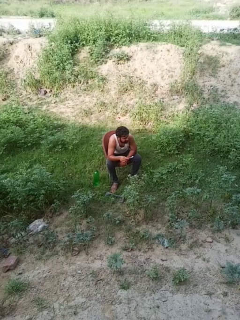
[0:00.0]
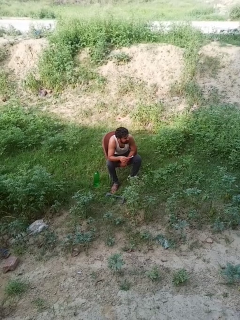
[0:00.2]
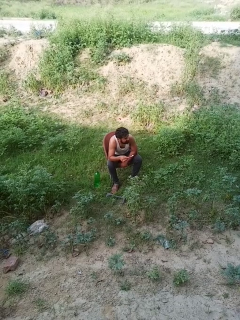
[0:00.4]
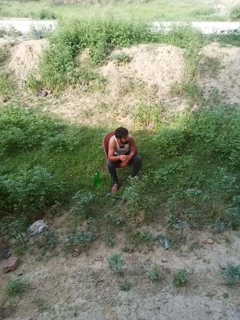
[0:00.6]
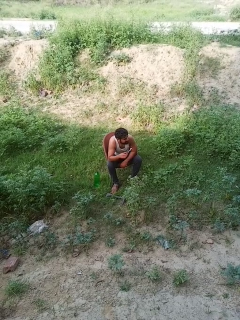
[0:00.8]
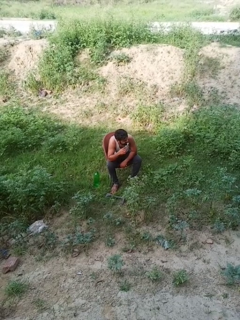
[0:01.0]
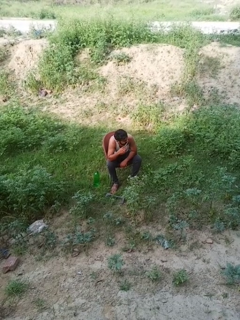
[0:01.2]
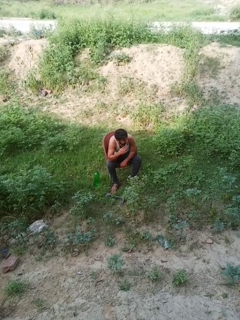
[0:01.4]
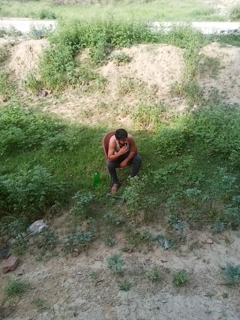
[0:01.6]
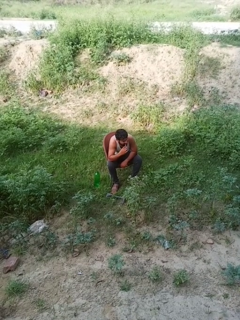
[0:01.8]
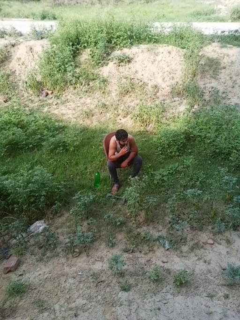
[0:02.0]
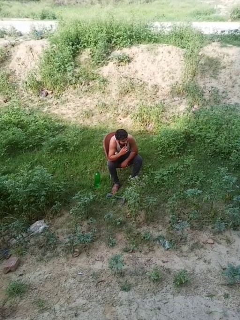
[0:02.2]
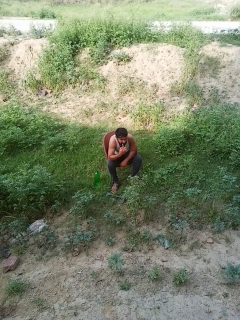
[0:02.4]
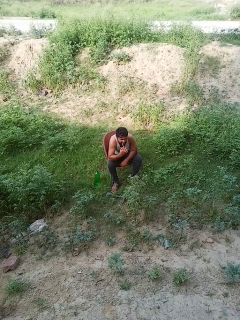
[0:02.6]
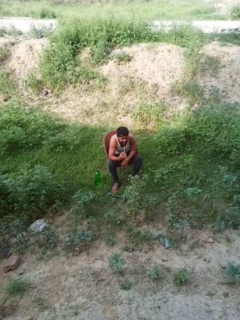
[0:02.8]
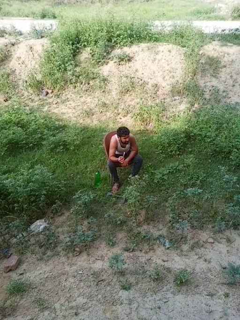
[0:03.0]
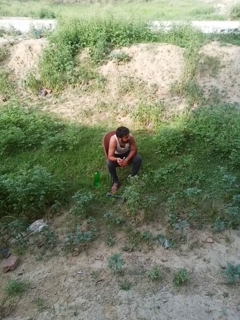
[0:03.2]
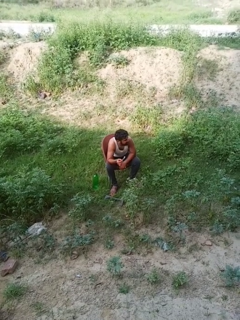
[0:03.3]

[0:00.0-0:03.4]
person brushes teeth

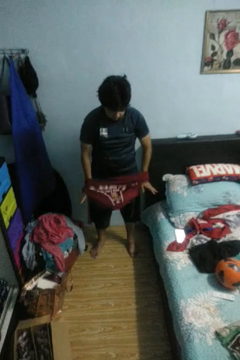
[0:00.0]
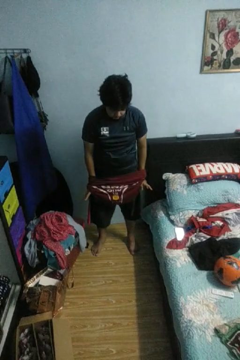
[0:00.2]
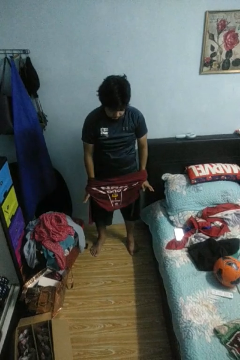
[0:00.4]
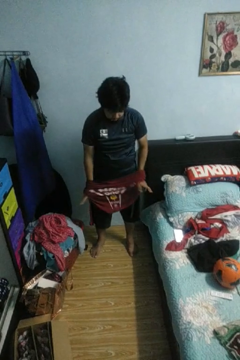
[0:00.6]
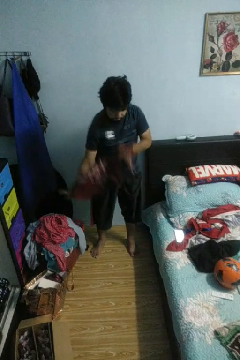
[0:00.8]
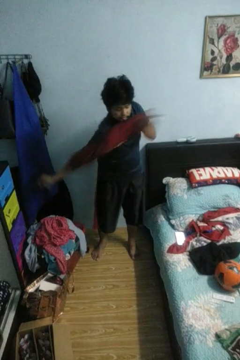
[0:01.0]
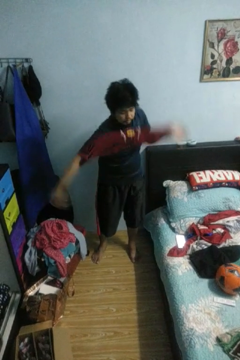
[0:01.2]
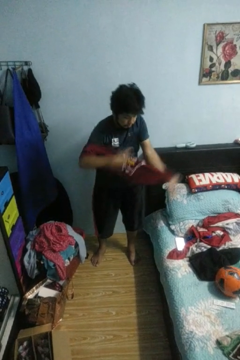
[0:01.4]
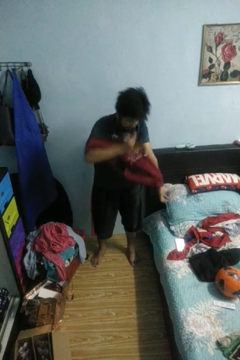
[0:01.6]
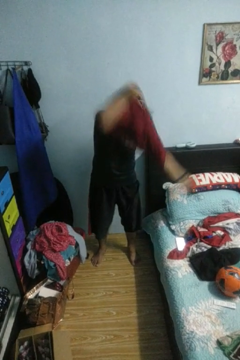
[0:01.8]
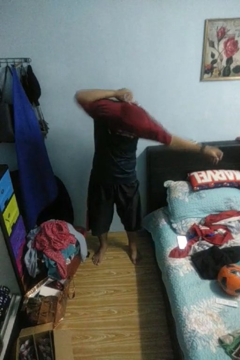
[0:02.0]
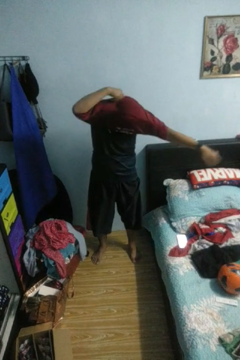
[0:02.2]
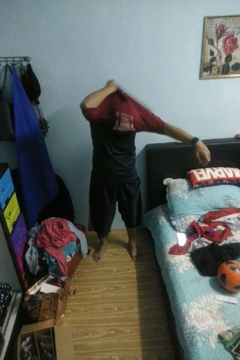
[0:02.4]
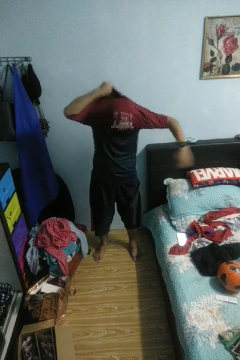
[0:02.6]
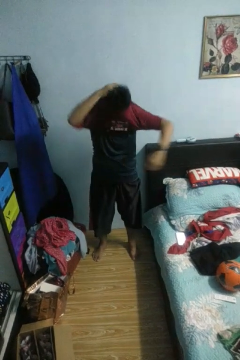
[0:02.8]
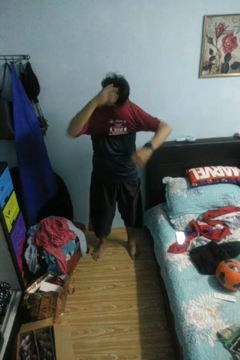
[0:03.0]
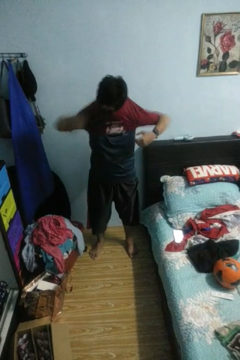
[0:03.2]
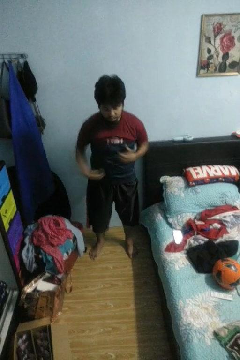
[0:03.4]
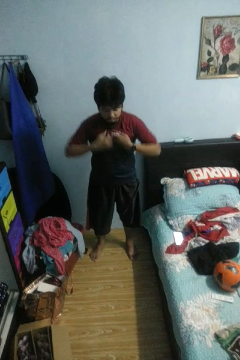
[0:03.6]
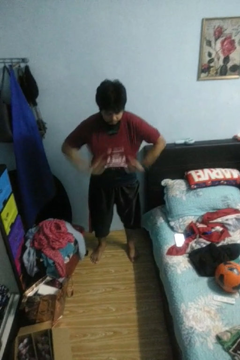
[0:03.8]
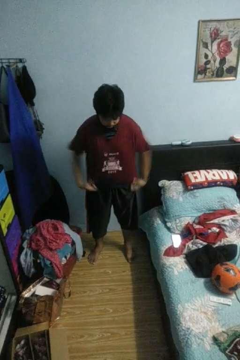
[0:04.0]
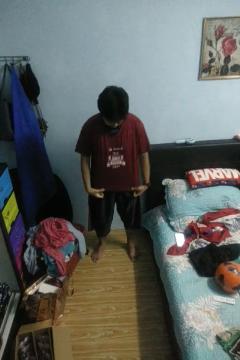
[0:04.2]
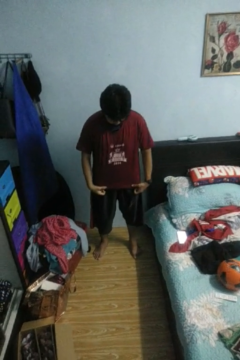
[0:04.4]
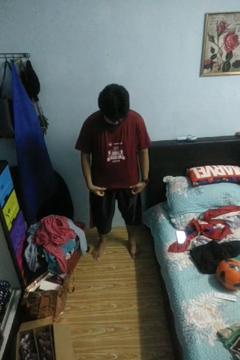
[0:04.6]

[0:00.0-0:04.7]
person puts on shirt

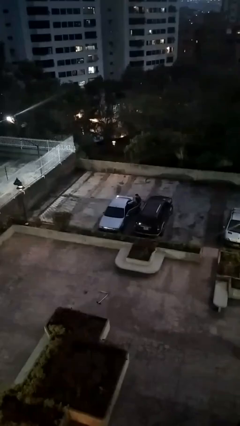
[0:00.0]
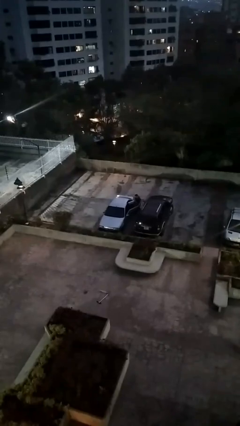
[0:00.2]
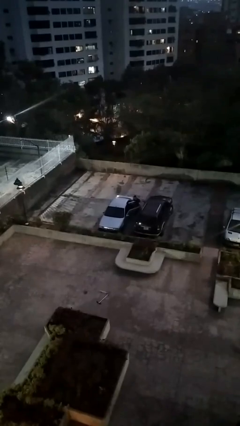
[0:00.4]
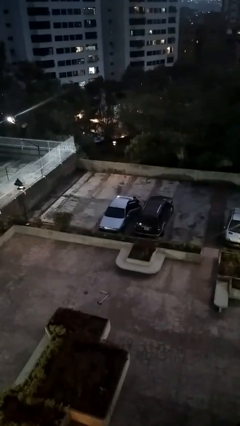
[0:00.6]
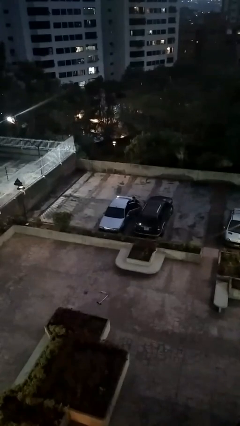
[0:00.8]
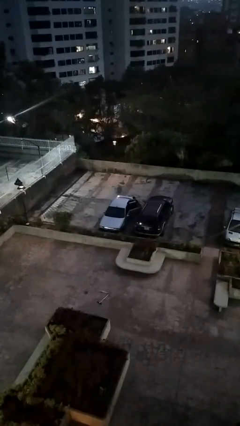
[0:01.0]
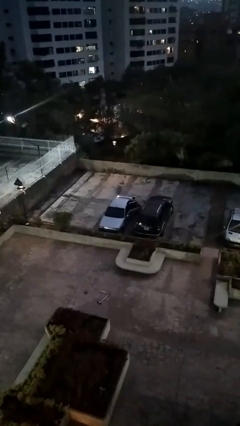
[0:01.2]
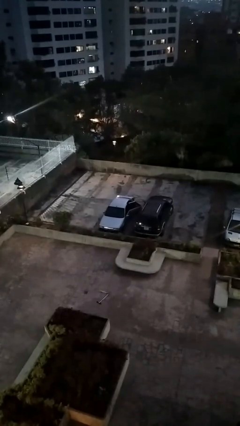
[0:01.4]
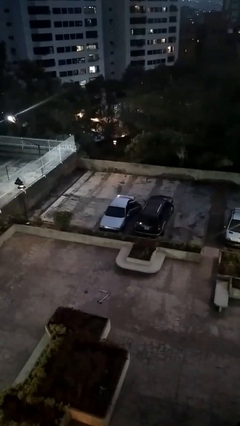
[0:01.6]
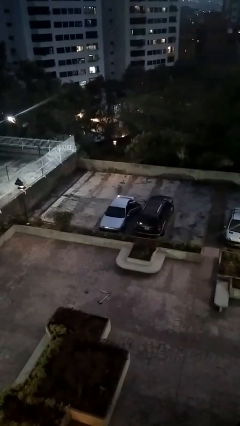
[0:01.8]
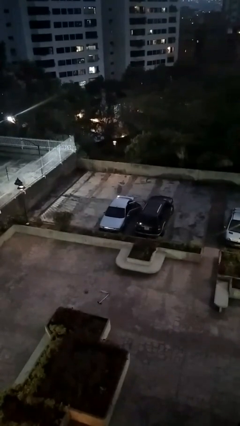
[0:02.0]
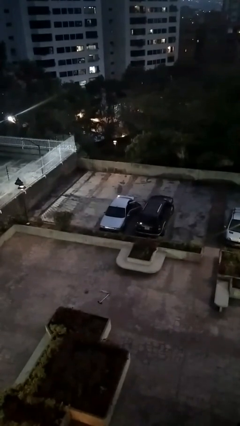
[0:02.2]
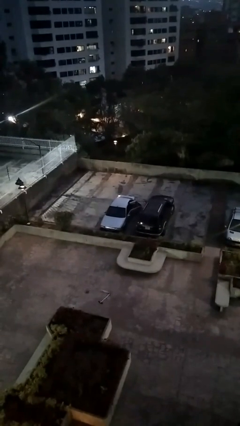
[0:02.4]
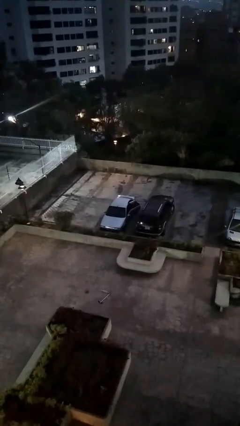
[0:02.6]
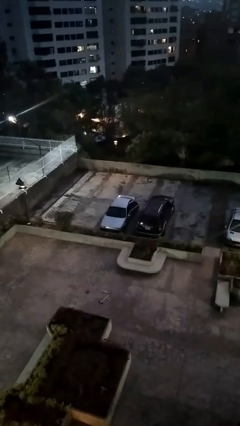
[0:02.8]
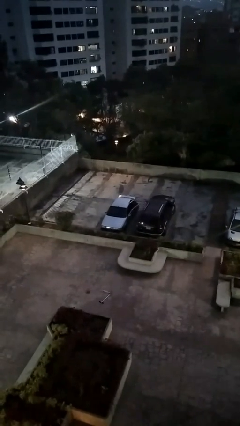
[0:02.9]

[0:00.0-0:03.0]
car picks up person

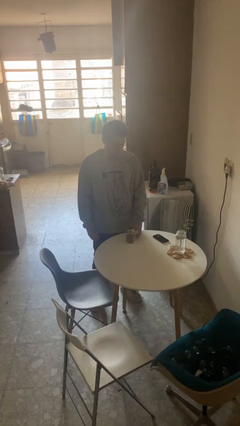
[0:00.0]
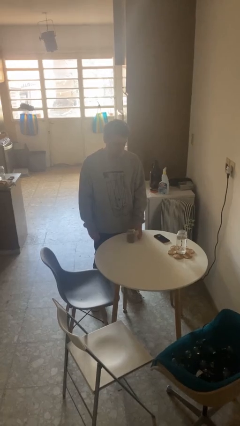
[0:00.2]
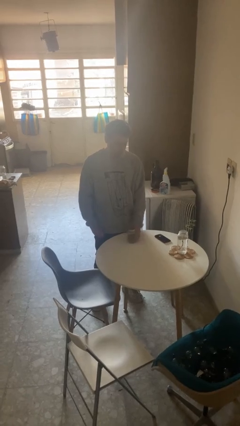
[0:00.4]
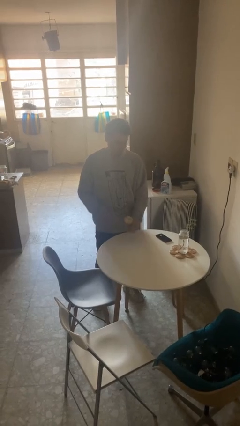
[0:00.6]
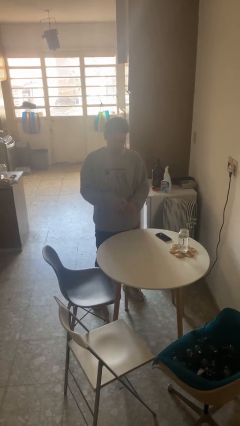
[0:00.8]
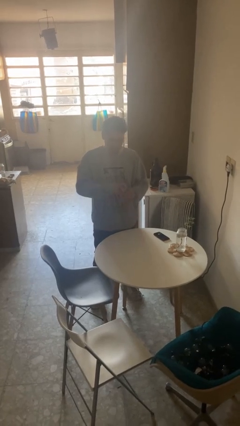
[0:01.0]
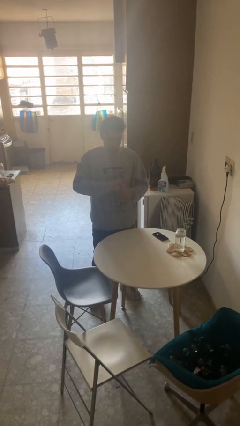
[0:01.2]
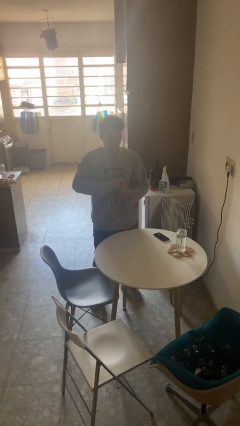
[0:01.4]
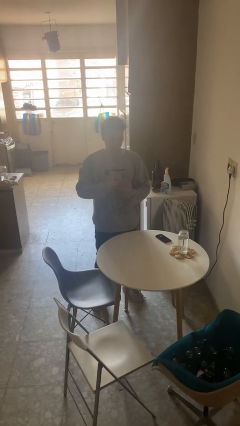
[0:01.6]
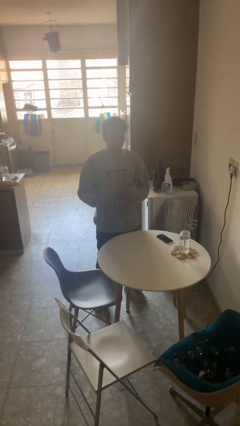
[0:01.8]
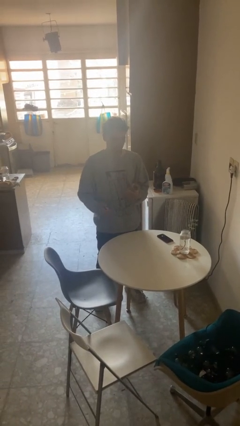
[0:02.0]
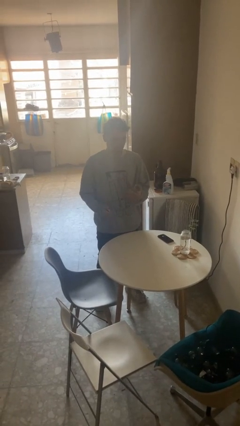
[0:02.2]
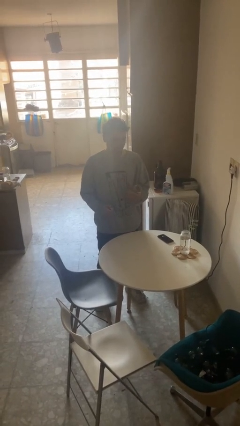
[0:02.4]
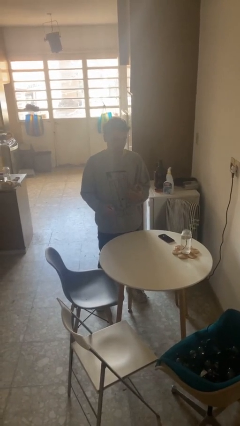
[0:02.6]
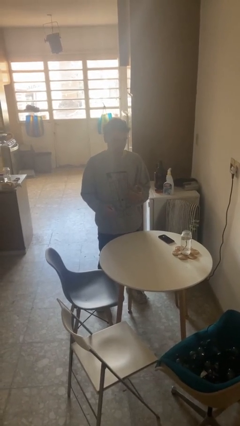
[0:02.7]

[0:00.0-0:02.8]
person opens jar

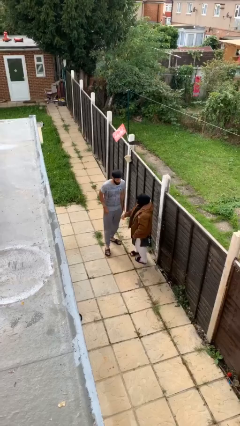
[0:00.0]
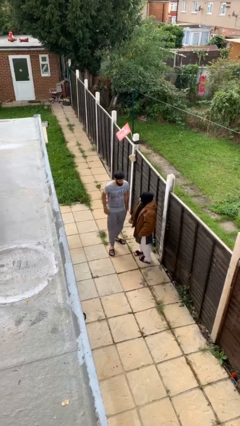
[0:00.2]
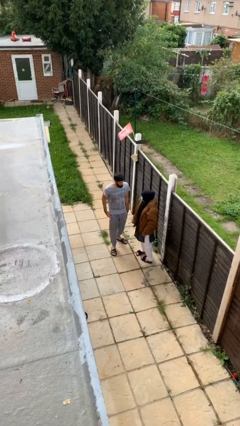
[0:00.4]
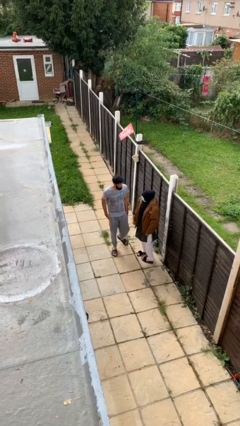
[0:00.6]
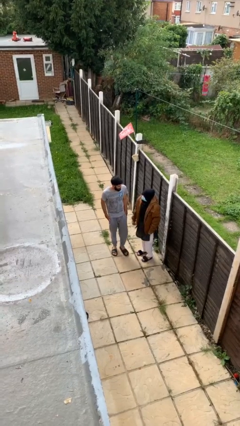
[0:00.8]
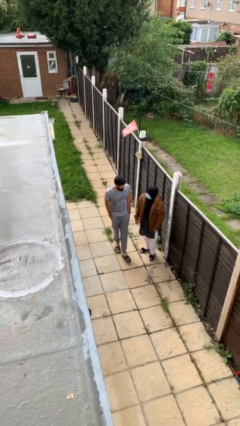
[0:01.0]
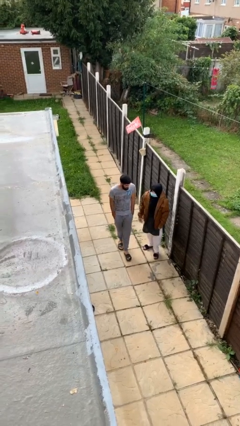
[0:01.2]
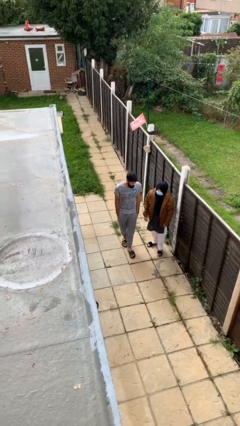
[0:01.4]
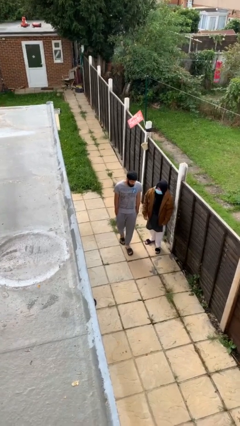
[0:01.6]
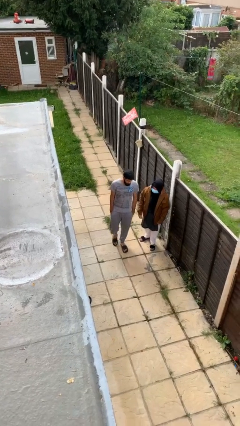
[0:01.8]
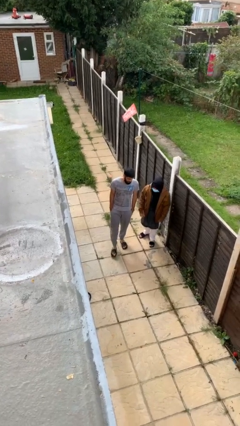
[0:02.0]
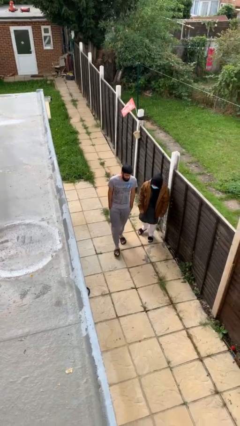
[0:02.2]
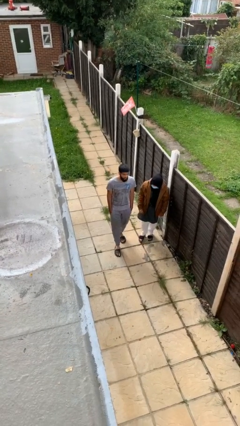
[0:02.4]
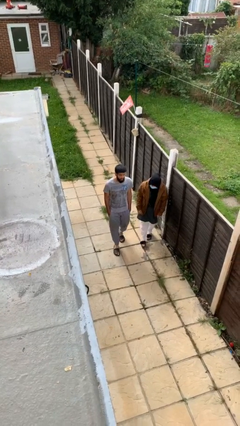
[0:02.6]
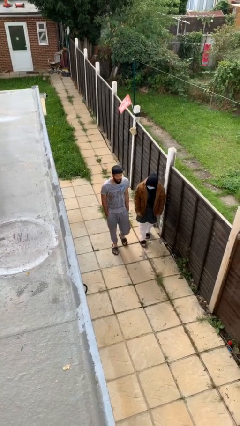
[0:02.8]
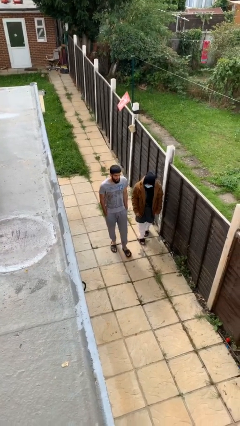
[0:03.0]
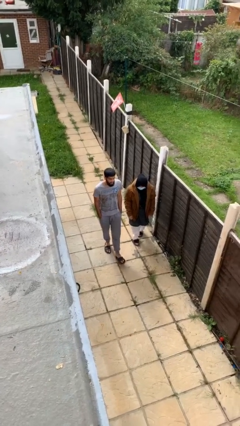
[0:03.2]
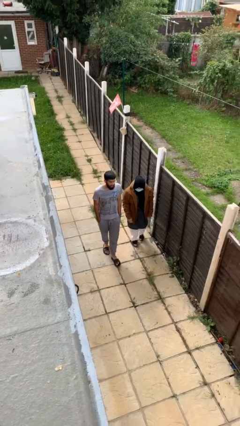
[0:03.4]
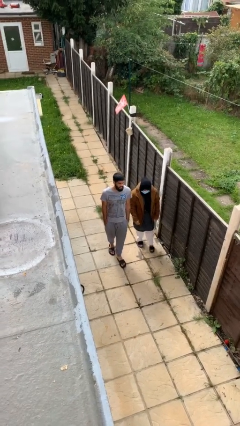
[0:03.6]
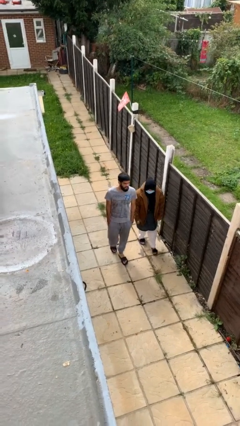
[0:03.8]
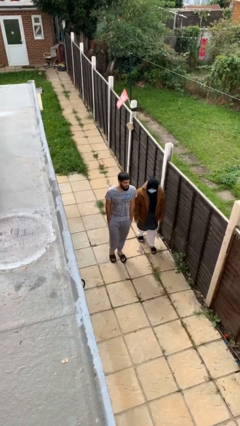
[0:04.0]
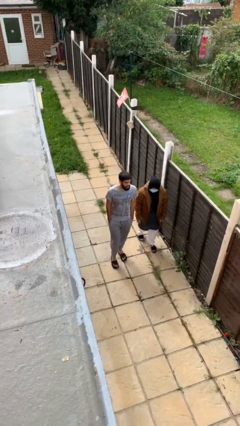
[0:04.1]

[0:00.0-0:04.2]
person talks to person

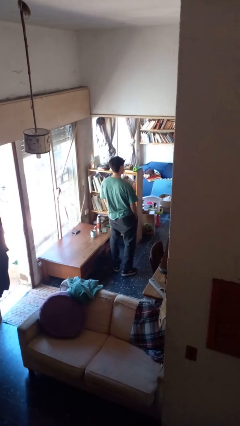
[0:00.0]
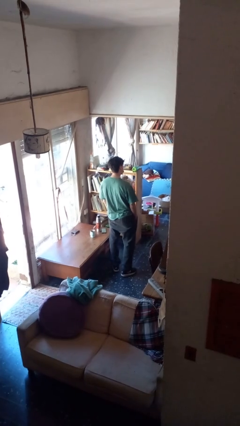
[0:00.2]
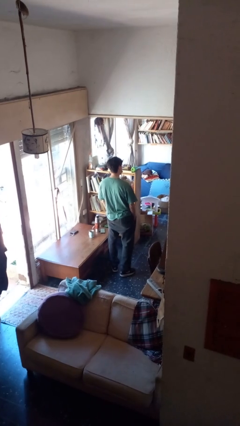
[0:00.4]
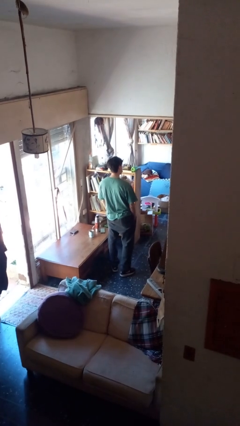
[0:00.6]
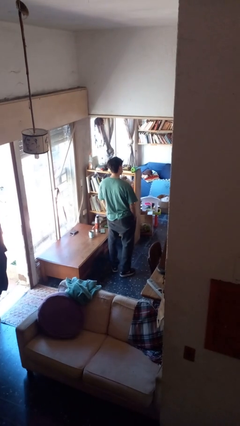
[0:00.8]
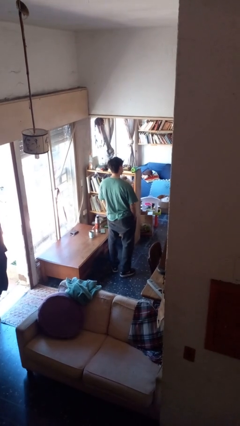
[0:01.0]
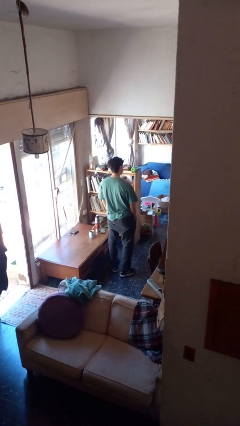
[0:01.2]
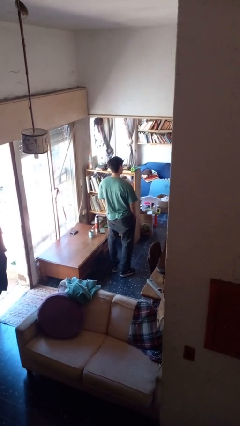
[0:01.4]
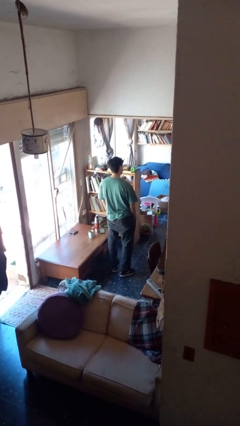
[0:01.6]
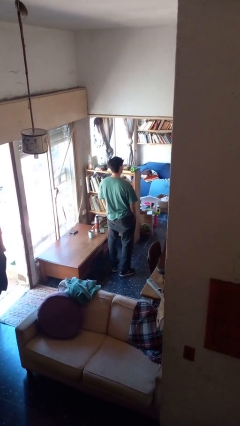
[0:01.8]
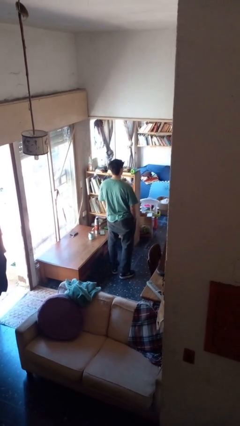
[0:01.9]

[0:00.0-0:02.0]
person sticks out tongue
